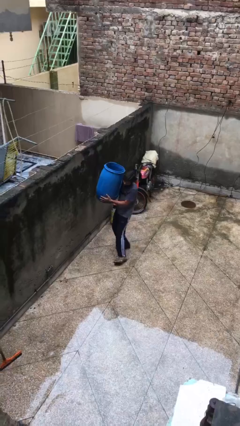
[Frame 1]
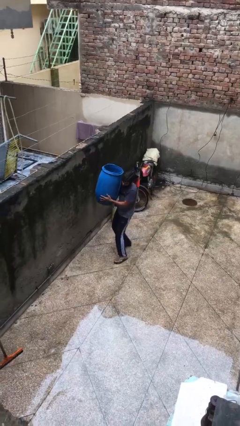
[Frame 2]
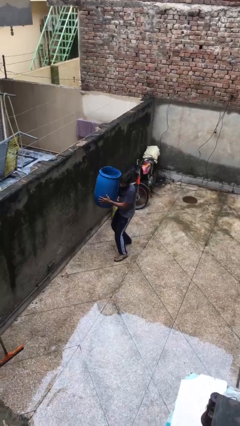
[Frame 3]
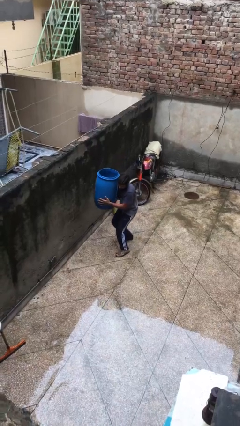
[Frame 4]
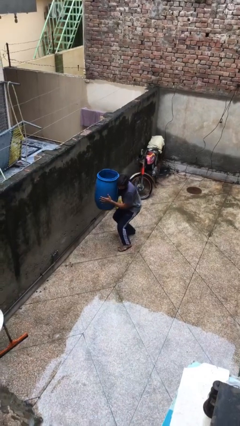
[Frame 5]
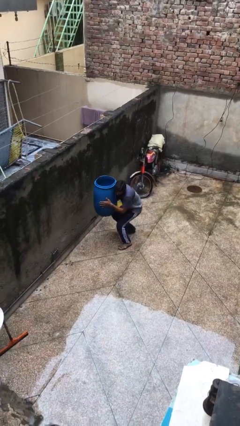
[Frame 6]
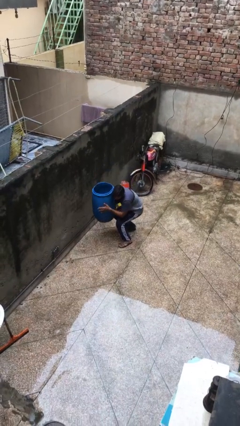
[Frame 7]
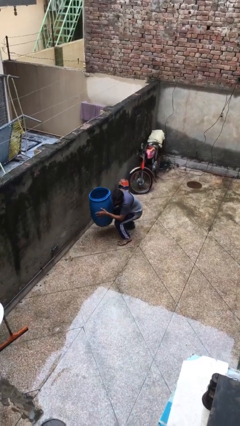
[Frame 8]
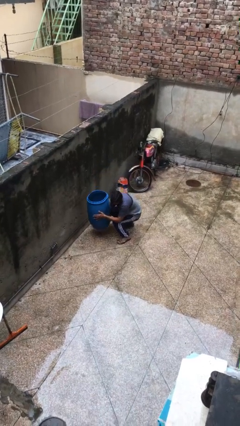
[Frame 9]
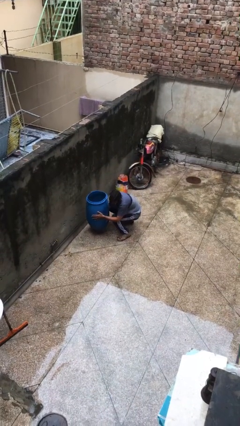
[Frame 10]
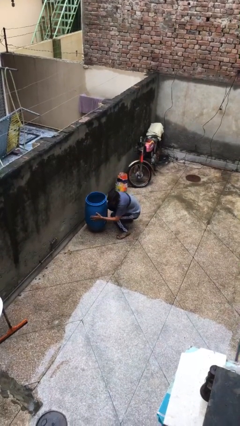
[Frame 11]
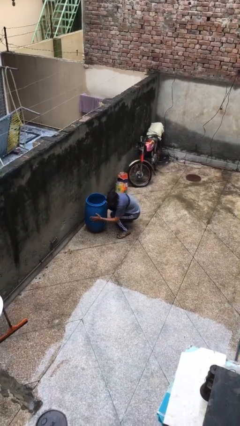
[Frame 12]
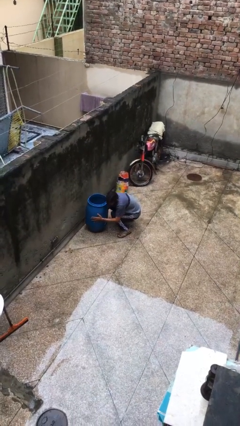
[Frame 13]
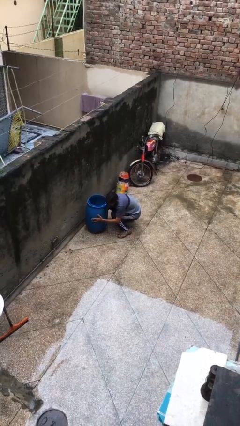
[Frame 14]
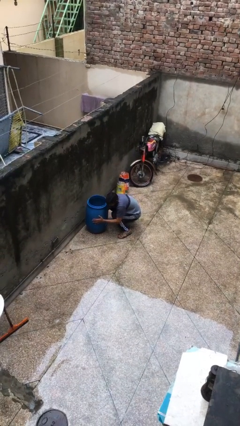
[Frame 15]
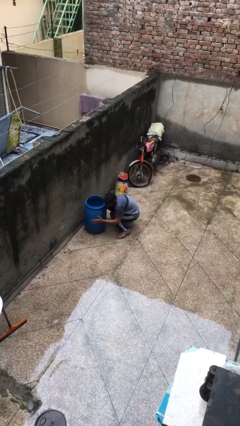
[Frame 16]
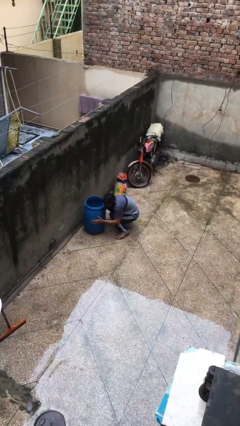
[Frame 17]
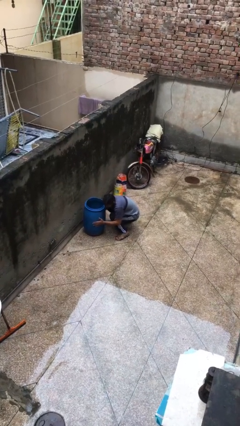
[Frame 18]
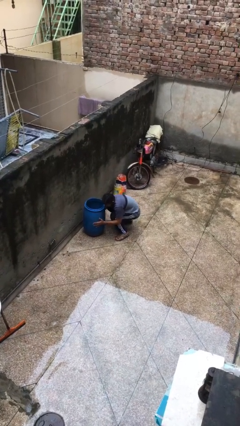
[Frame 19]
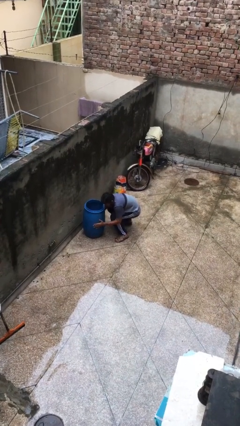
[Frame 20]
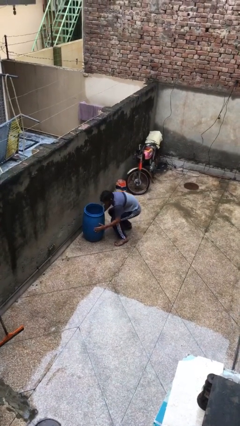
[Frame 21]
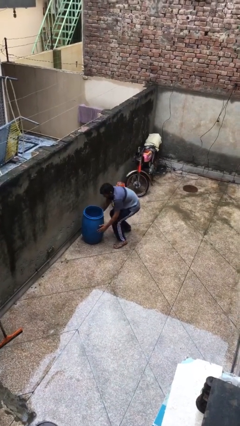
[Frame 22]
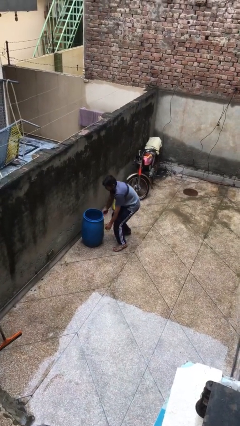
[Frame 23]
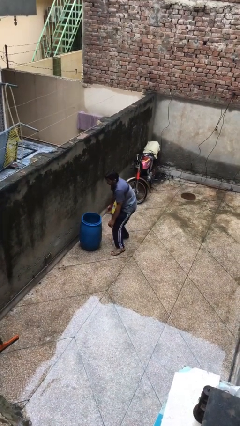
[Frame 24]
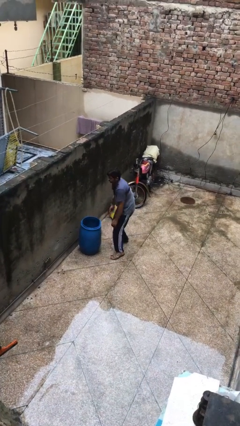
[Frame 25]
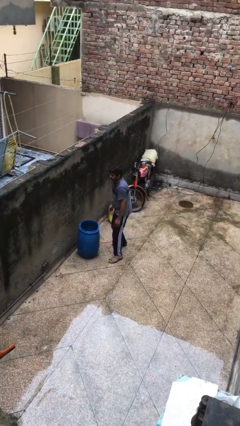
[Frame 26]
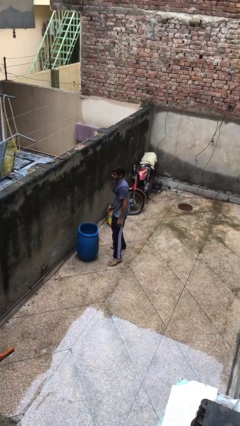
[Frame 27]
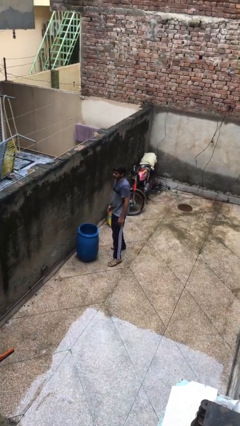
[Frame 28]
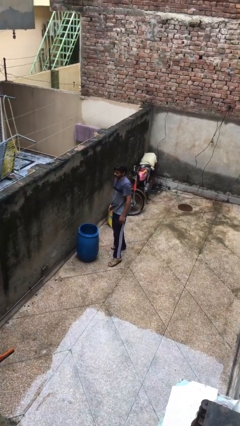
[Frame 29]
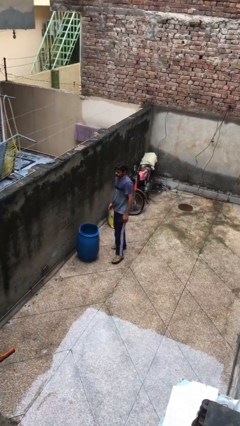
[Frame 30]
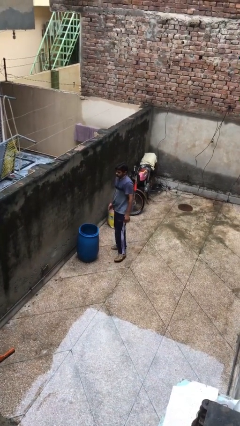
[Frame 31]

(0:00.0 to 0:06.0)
person puts down object on floor

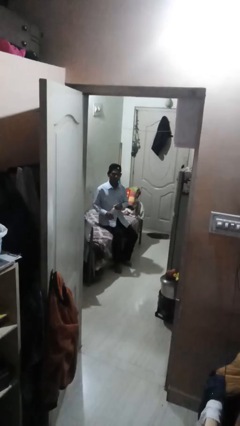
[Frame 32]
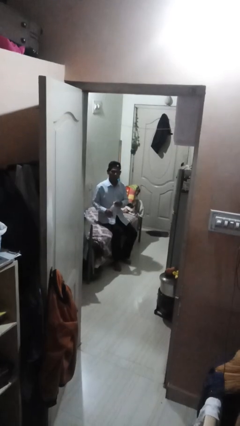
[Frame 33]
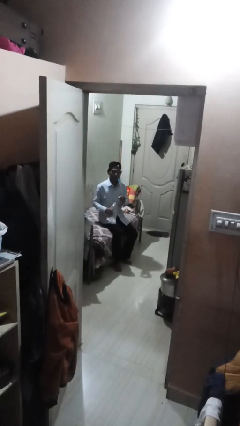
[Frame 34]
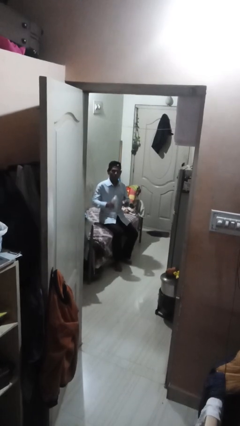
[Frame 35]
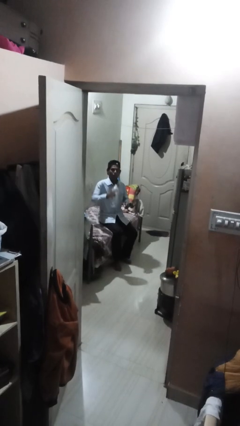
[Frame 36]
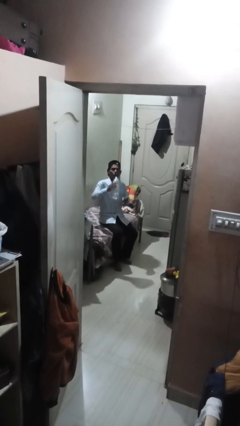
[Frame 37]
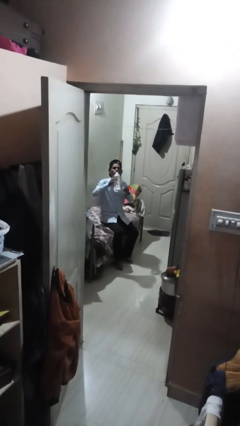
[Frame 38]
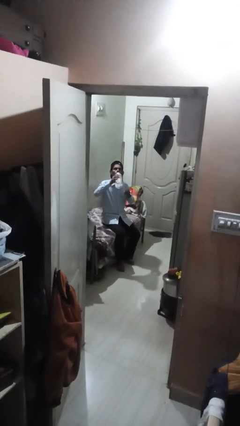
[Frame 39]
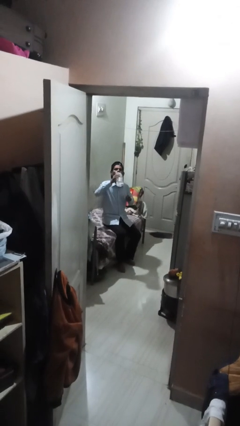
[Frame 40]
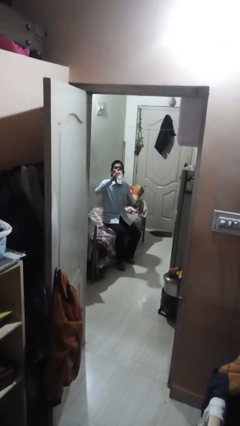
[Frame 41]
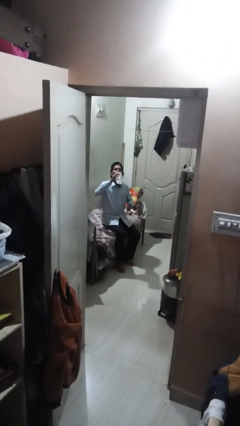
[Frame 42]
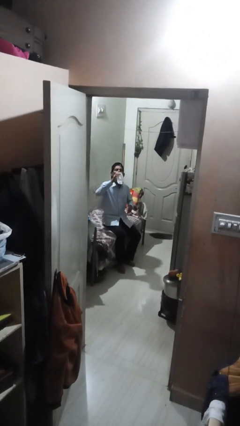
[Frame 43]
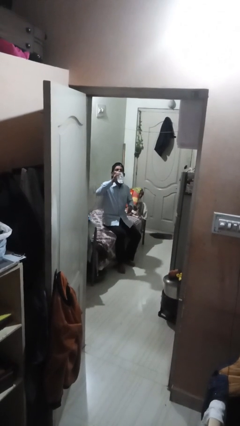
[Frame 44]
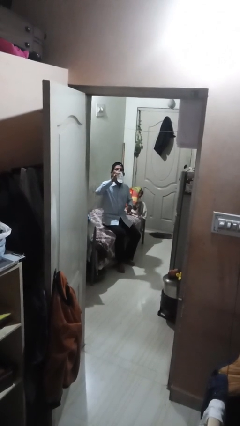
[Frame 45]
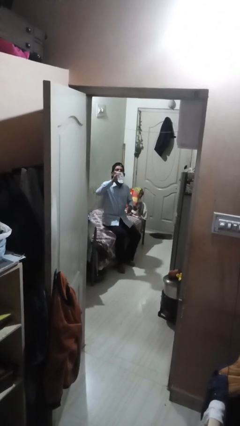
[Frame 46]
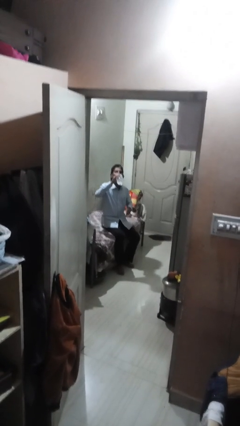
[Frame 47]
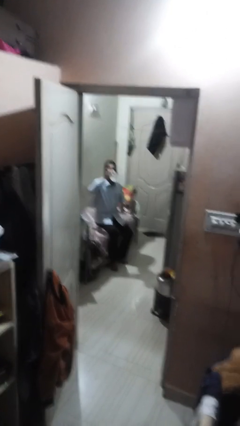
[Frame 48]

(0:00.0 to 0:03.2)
person drinks from bottle

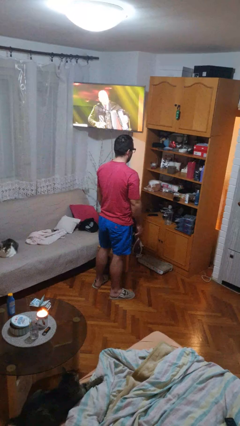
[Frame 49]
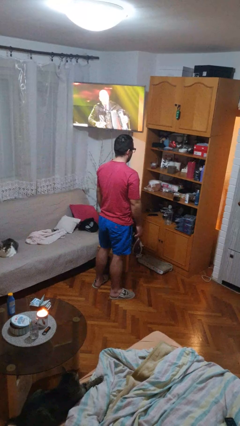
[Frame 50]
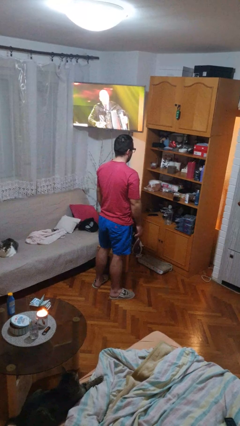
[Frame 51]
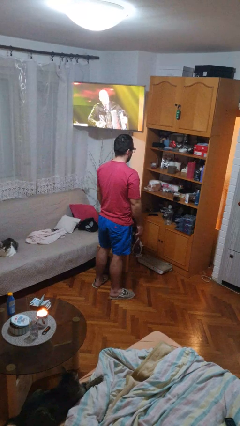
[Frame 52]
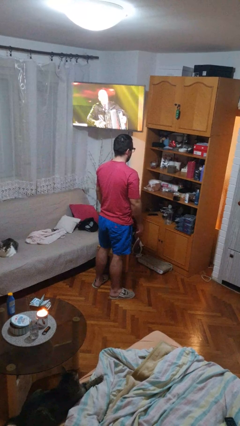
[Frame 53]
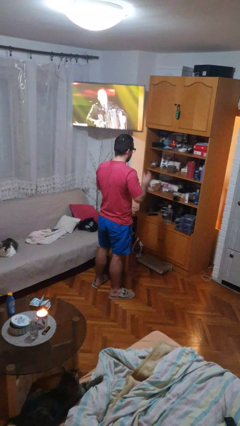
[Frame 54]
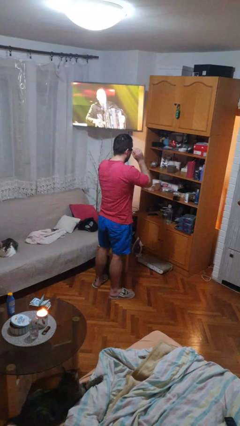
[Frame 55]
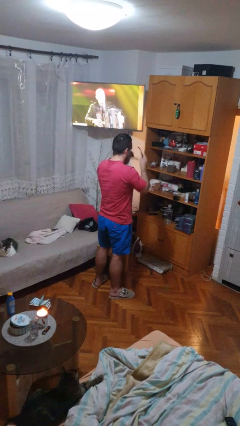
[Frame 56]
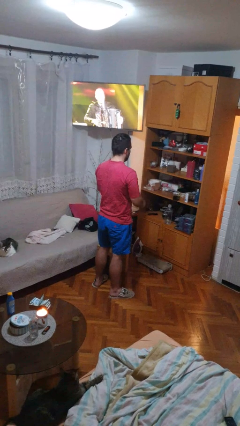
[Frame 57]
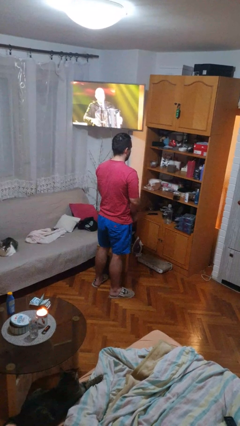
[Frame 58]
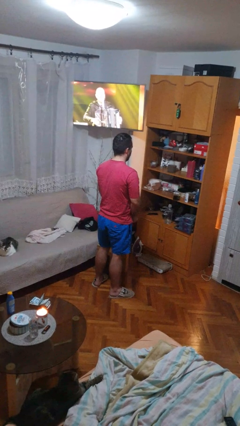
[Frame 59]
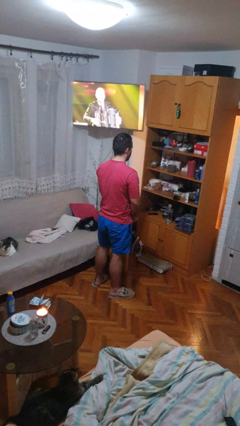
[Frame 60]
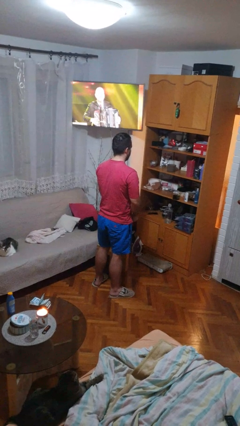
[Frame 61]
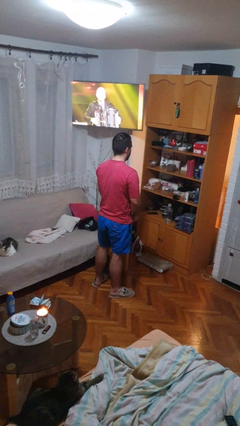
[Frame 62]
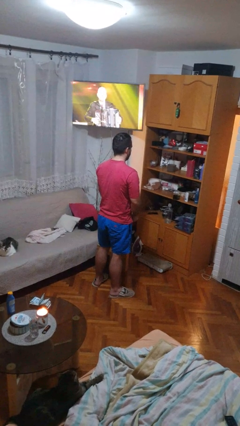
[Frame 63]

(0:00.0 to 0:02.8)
person takes off glasses

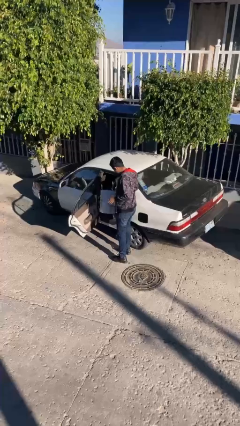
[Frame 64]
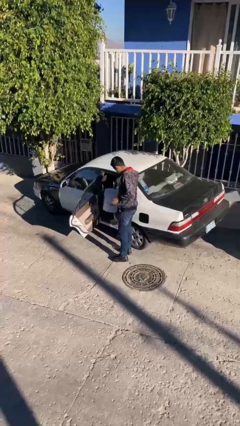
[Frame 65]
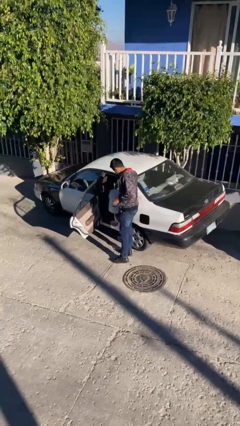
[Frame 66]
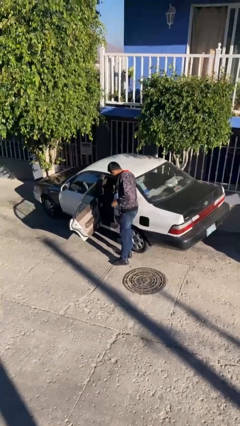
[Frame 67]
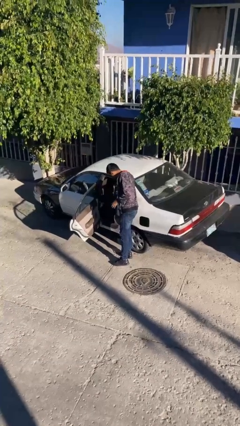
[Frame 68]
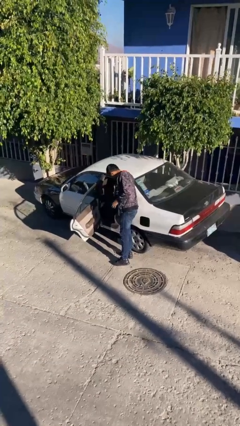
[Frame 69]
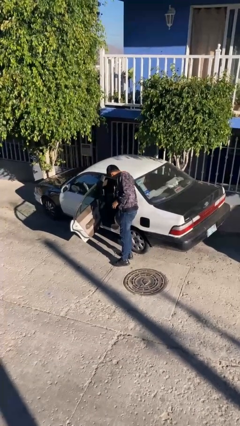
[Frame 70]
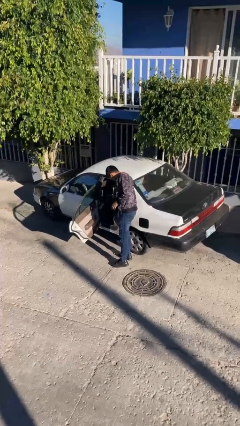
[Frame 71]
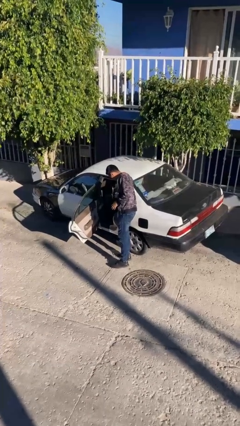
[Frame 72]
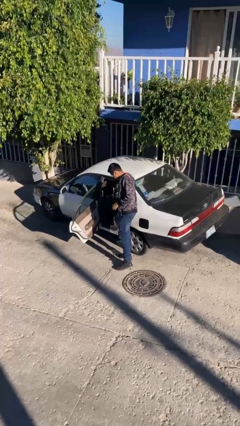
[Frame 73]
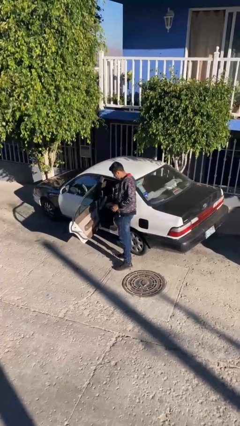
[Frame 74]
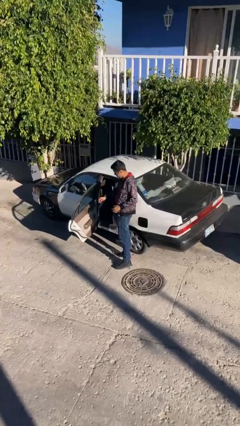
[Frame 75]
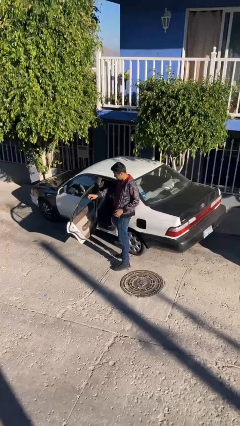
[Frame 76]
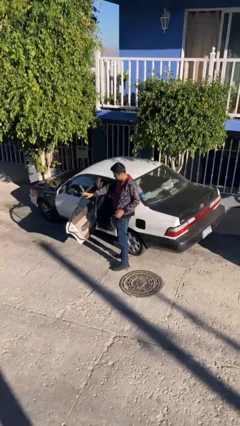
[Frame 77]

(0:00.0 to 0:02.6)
person loads car

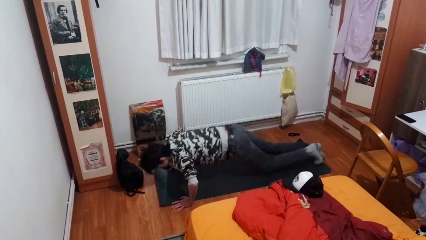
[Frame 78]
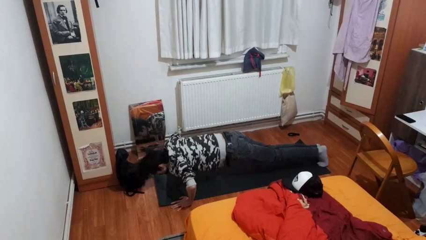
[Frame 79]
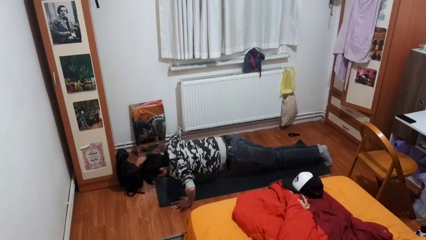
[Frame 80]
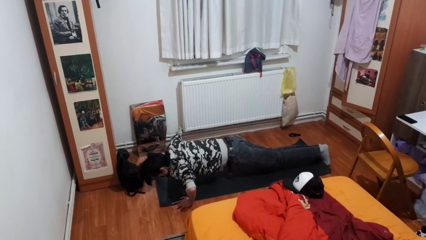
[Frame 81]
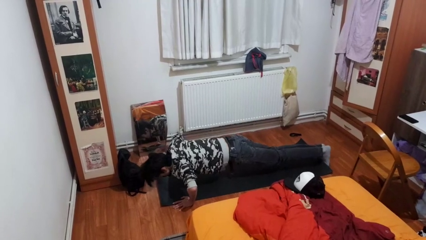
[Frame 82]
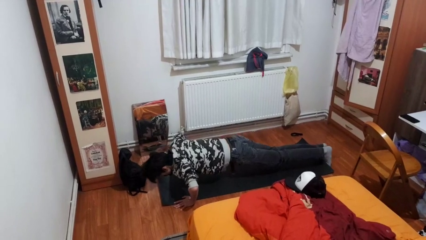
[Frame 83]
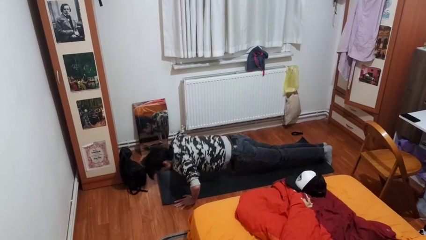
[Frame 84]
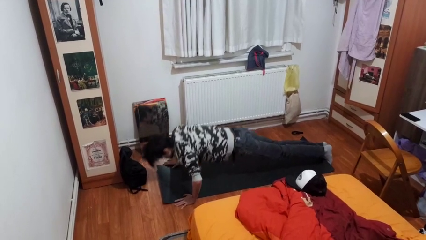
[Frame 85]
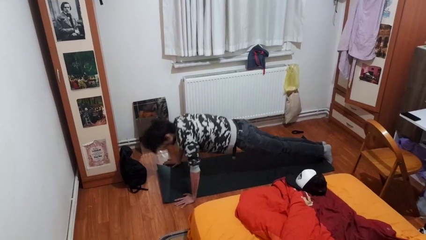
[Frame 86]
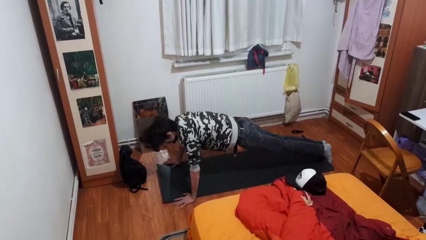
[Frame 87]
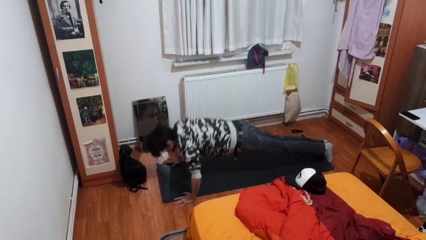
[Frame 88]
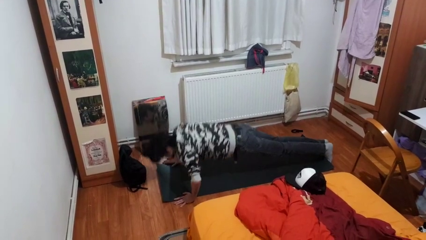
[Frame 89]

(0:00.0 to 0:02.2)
person exercises with pushup

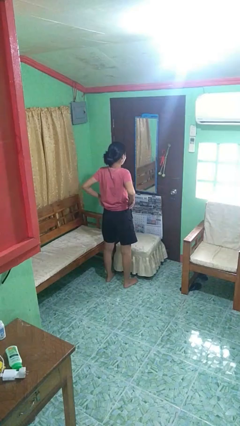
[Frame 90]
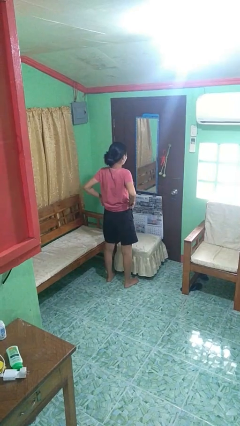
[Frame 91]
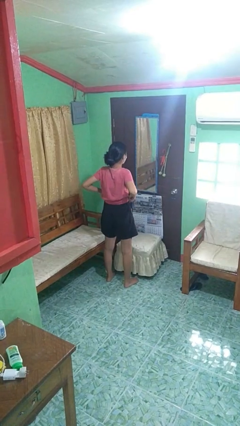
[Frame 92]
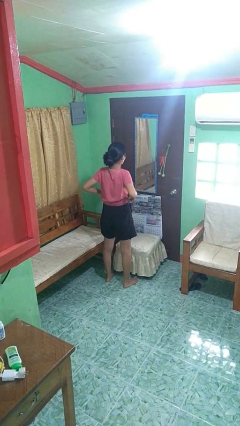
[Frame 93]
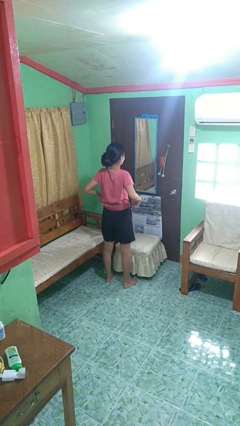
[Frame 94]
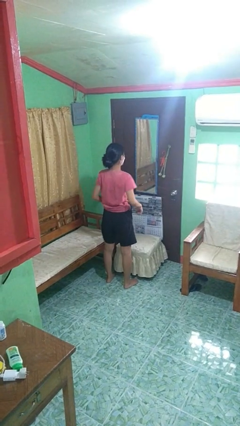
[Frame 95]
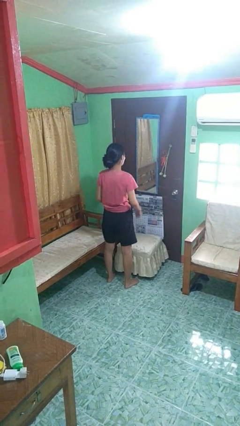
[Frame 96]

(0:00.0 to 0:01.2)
person hikes up pants
